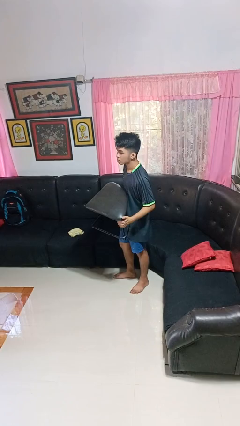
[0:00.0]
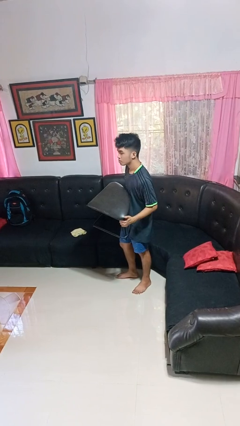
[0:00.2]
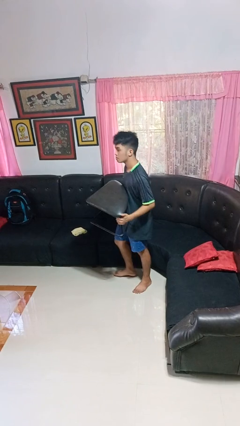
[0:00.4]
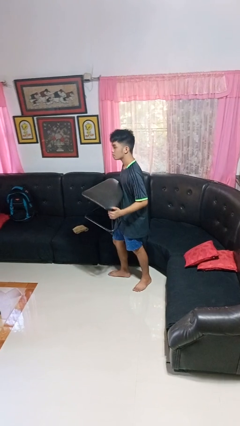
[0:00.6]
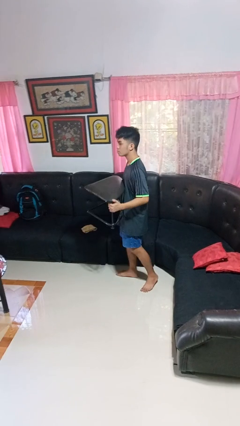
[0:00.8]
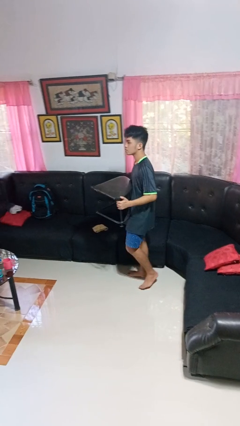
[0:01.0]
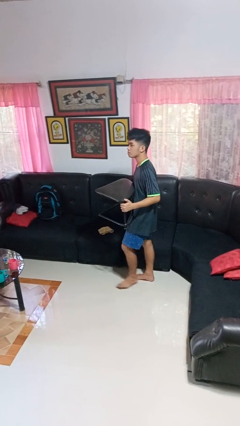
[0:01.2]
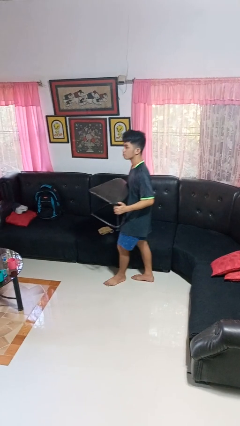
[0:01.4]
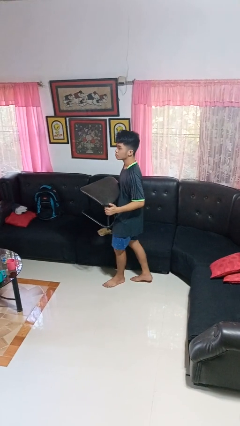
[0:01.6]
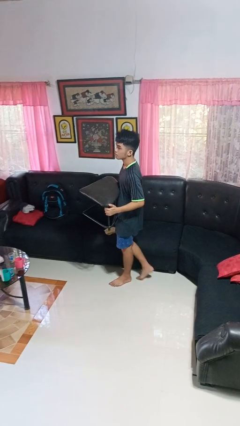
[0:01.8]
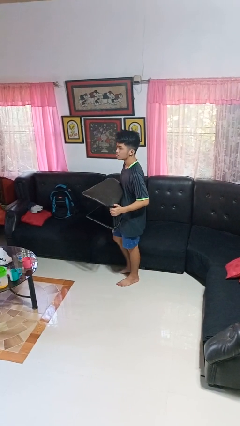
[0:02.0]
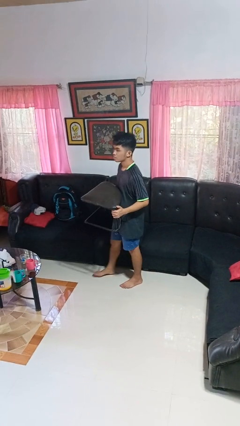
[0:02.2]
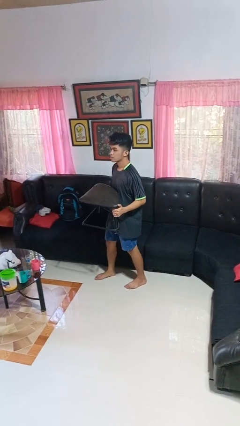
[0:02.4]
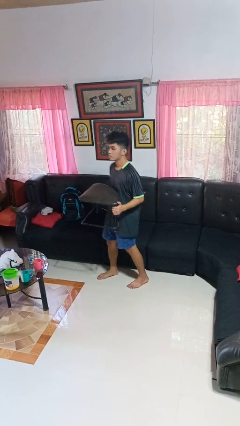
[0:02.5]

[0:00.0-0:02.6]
person carries furniture

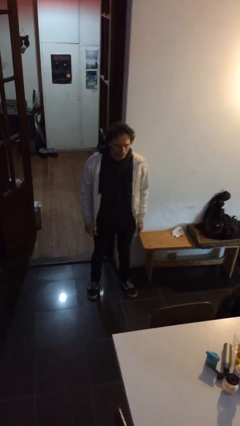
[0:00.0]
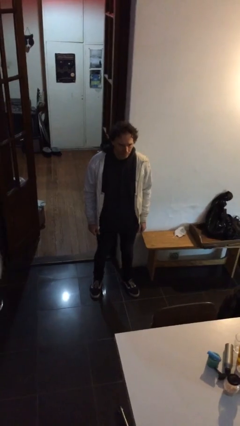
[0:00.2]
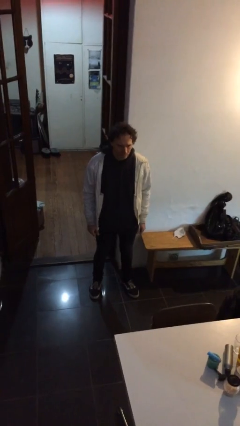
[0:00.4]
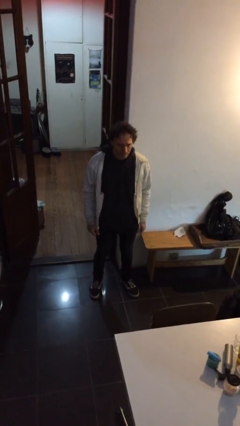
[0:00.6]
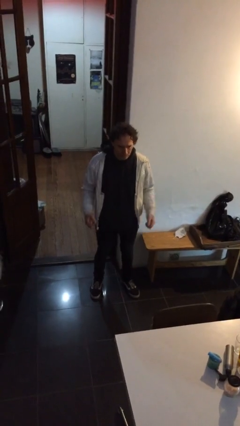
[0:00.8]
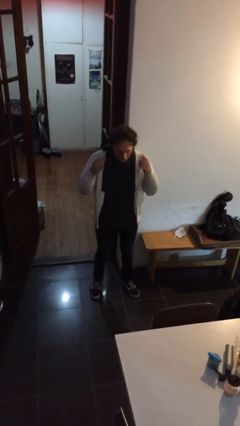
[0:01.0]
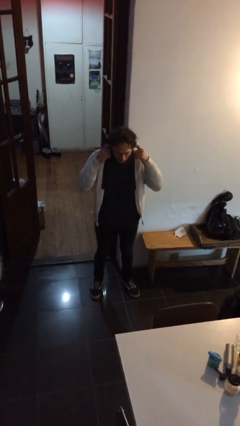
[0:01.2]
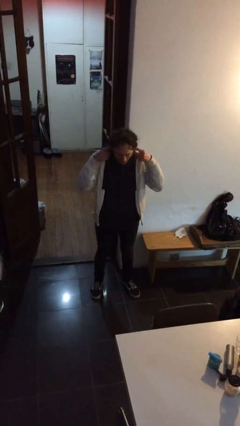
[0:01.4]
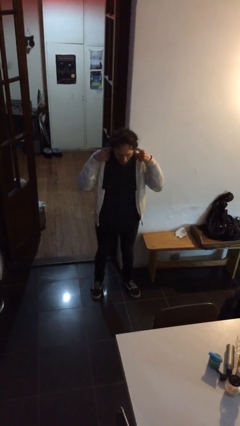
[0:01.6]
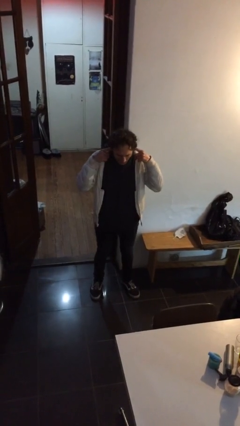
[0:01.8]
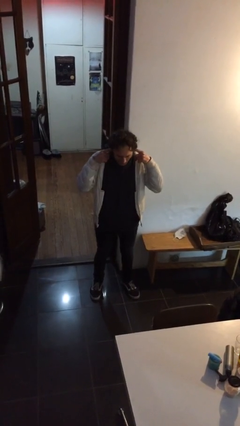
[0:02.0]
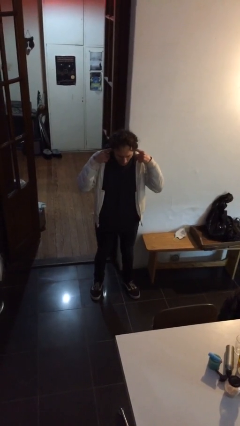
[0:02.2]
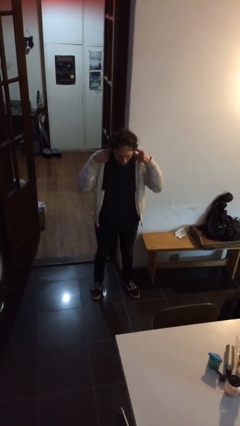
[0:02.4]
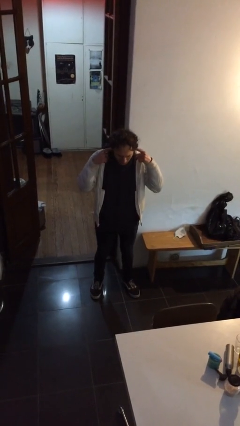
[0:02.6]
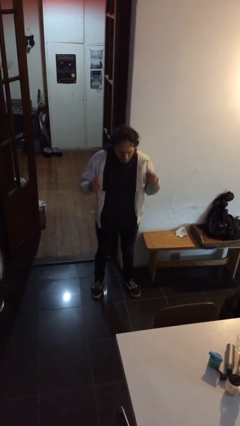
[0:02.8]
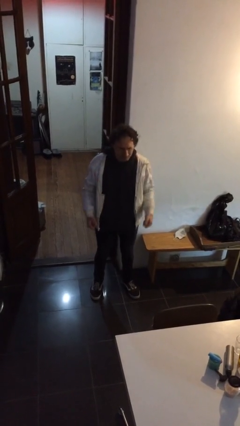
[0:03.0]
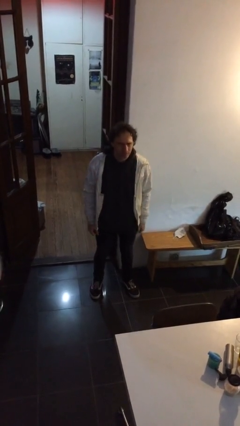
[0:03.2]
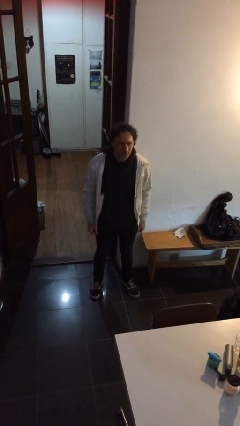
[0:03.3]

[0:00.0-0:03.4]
person puts fingers in ear

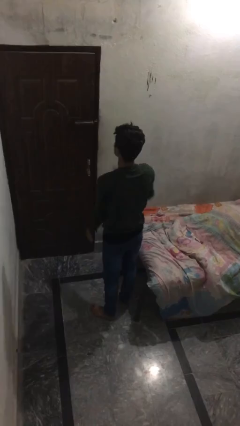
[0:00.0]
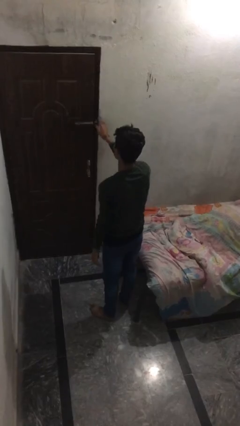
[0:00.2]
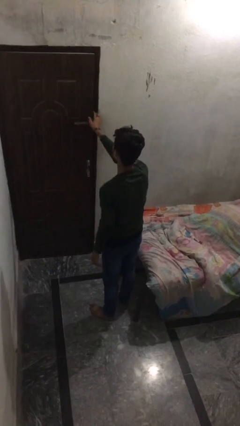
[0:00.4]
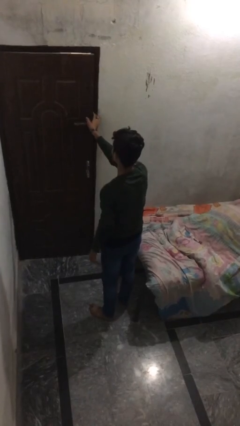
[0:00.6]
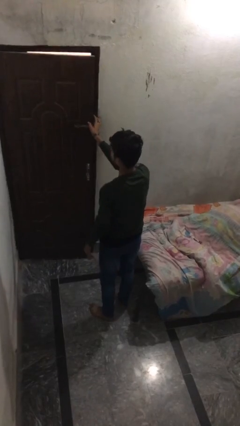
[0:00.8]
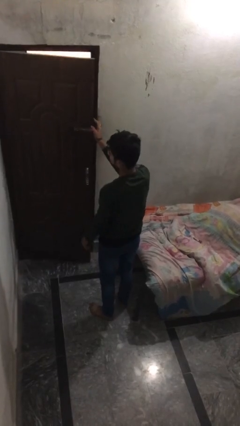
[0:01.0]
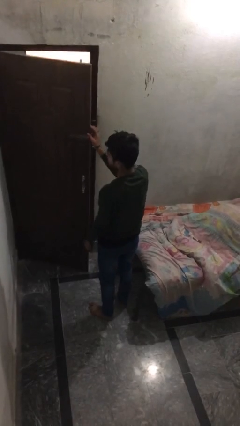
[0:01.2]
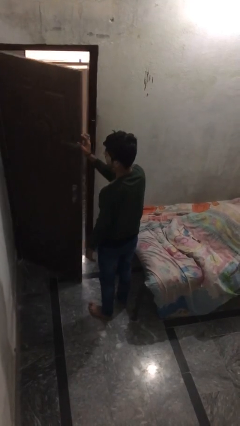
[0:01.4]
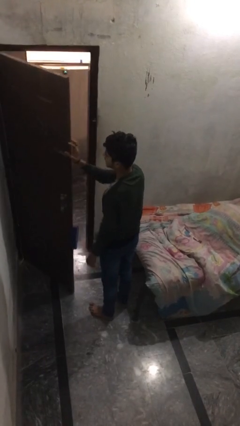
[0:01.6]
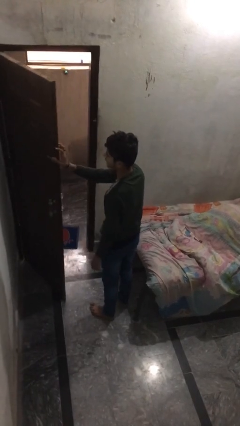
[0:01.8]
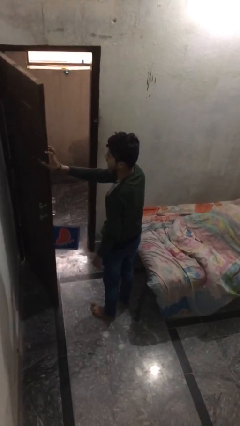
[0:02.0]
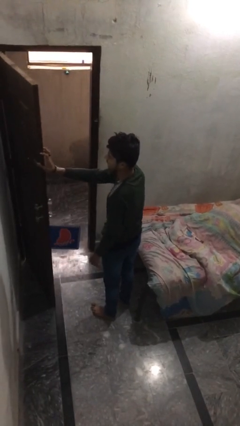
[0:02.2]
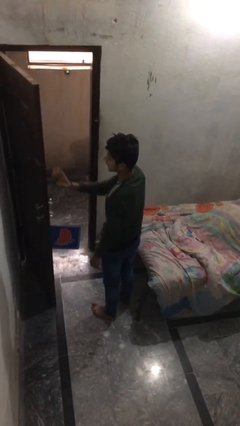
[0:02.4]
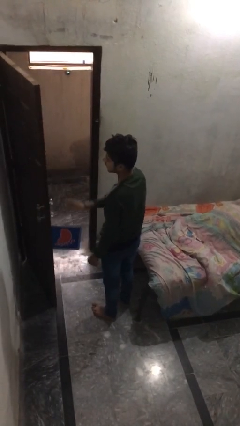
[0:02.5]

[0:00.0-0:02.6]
person opens facility door

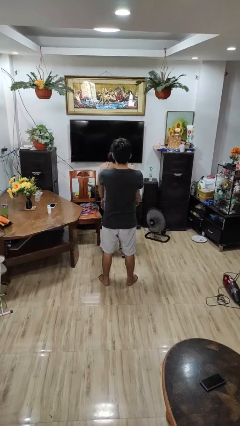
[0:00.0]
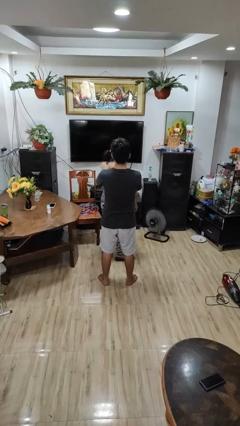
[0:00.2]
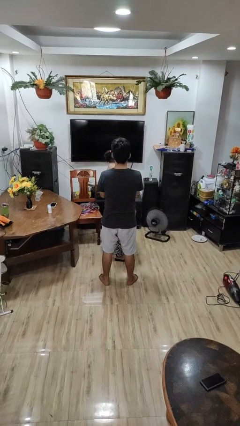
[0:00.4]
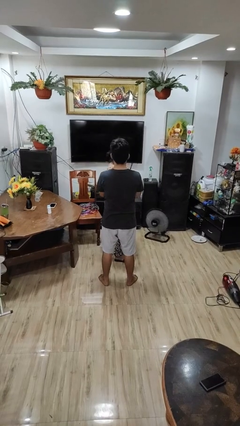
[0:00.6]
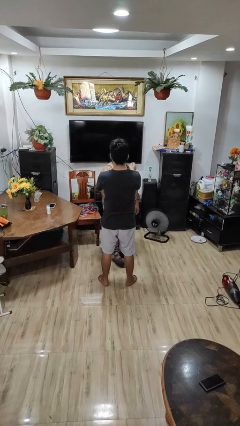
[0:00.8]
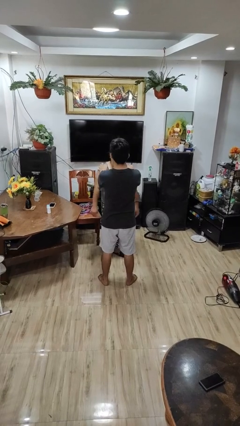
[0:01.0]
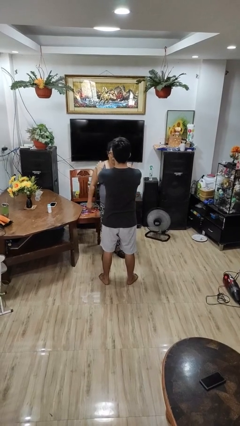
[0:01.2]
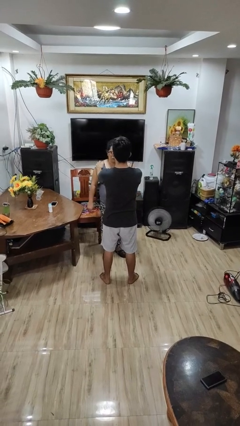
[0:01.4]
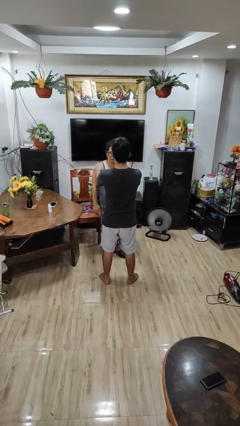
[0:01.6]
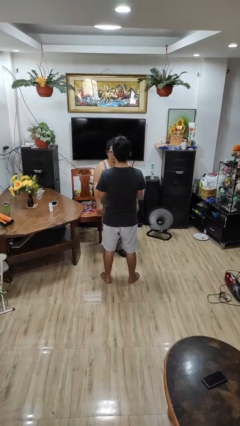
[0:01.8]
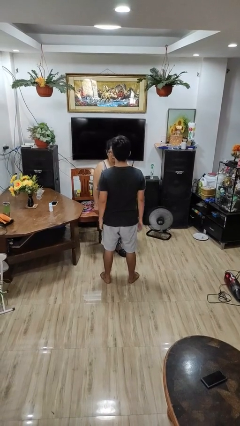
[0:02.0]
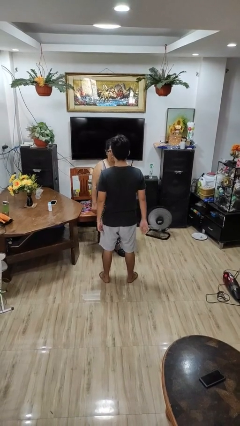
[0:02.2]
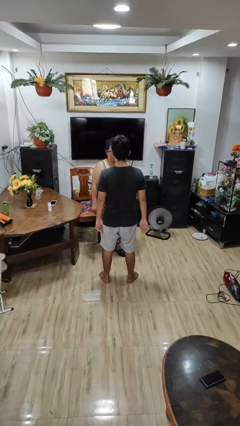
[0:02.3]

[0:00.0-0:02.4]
person spins person around

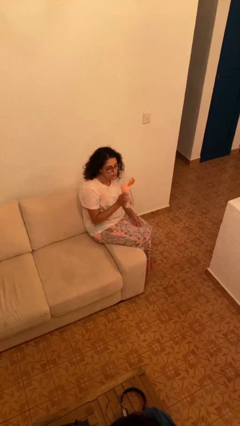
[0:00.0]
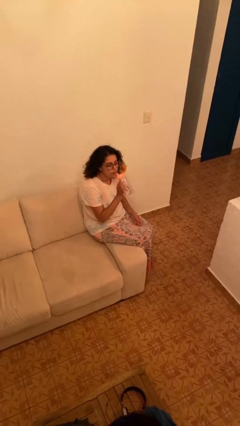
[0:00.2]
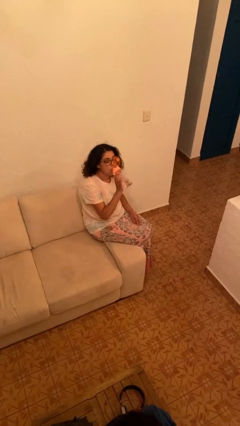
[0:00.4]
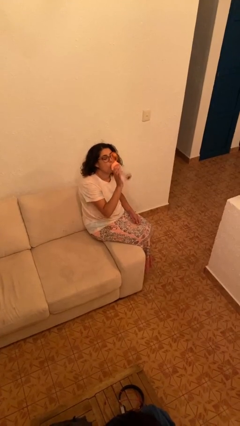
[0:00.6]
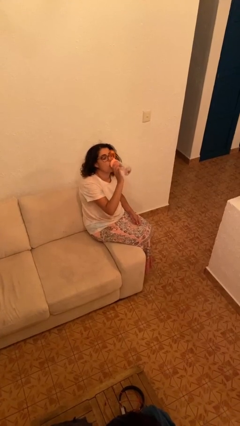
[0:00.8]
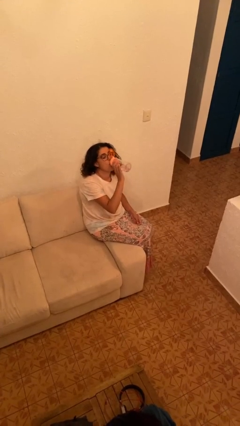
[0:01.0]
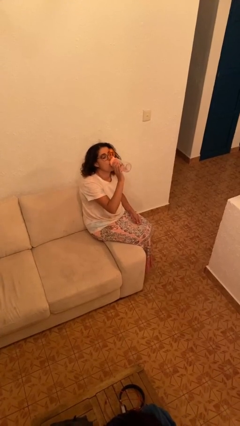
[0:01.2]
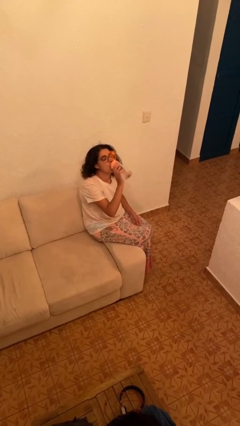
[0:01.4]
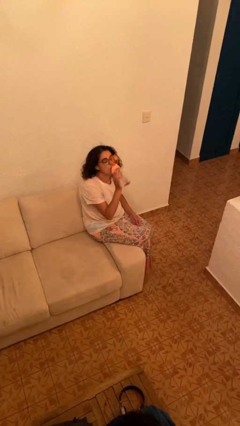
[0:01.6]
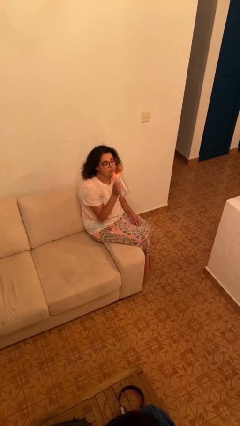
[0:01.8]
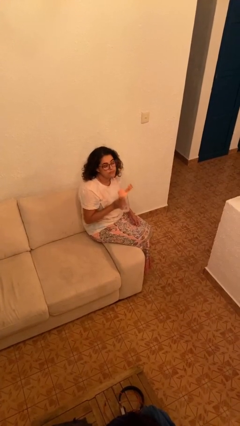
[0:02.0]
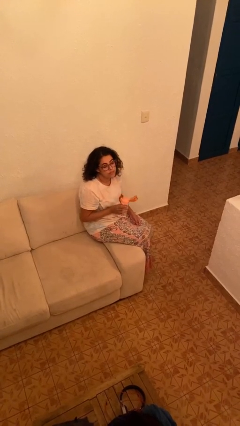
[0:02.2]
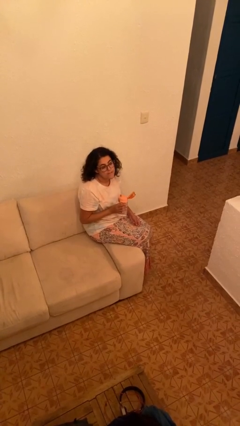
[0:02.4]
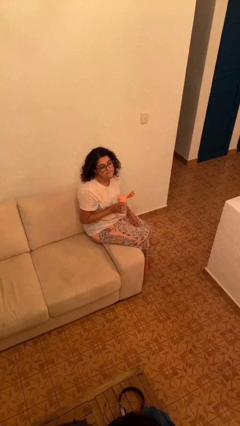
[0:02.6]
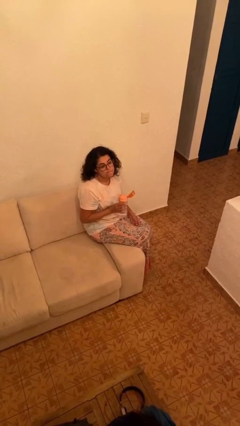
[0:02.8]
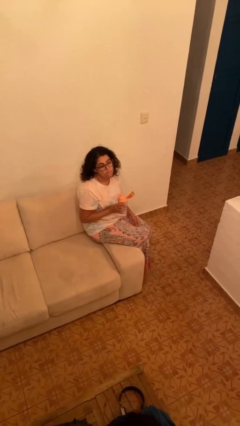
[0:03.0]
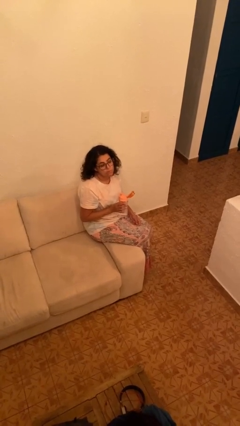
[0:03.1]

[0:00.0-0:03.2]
person drinks from bottle

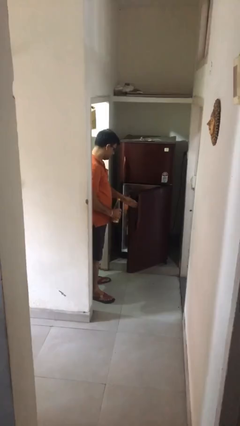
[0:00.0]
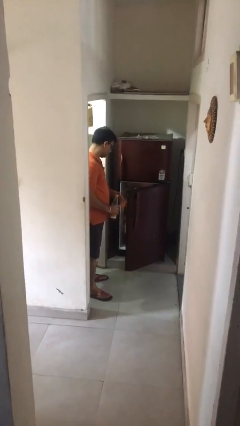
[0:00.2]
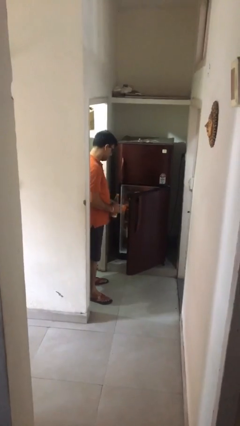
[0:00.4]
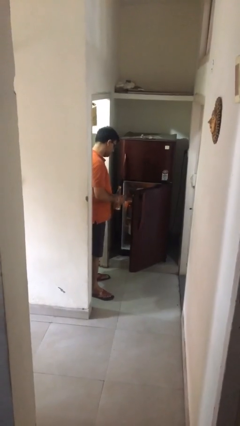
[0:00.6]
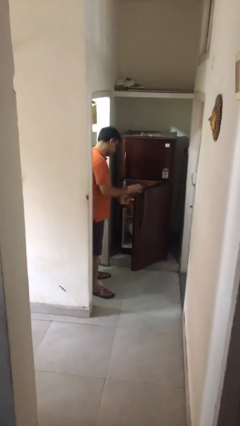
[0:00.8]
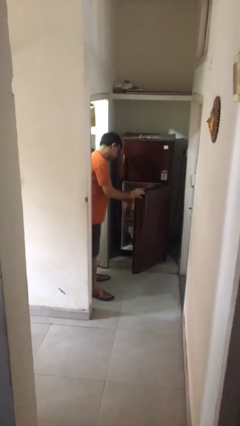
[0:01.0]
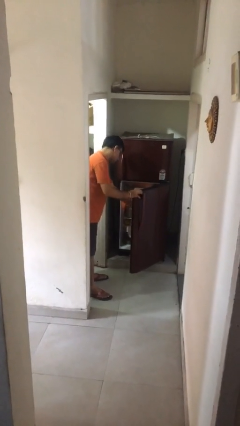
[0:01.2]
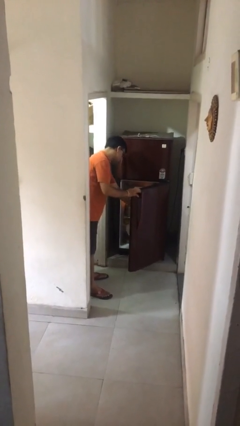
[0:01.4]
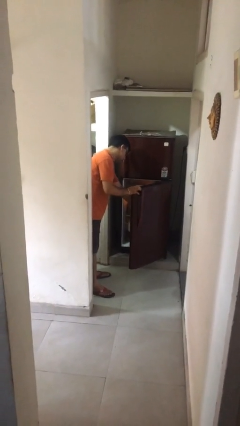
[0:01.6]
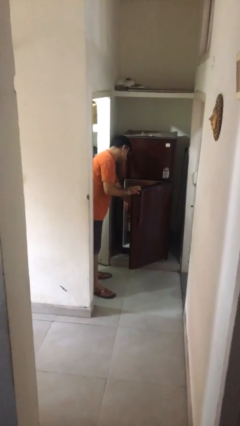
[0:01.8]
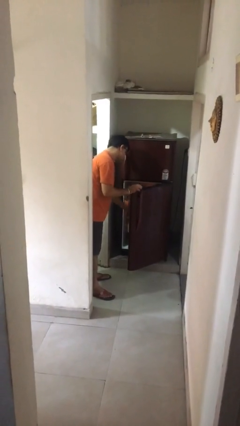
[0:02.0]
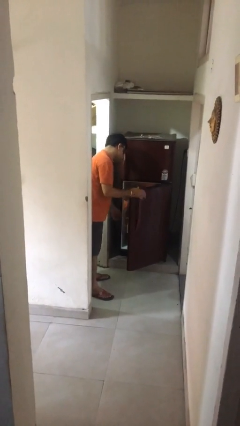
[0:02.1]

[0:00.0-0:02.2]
person puts object into refrigerator

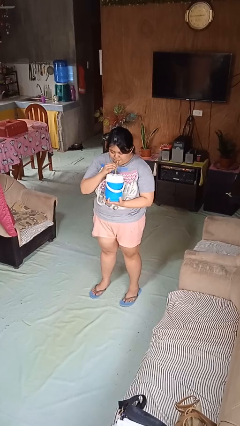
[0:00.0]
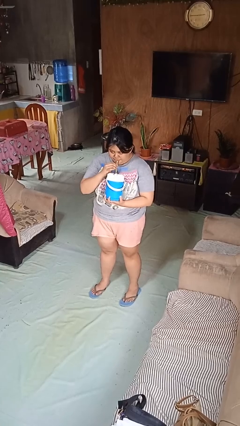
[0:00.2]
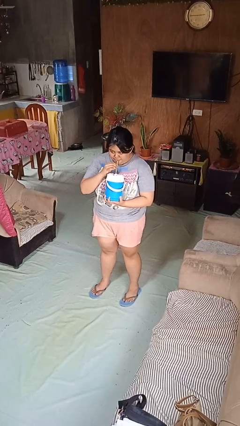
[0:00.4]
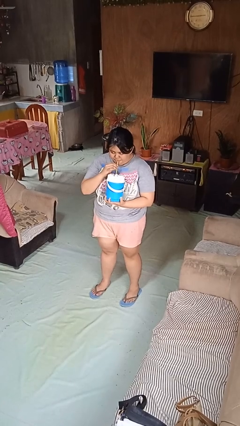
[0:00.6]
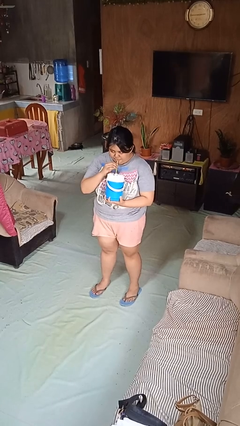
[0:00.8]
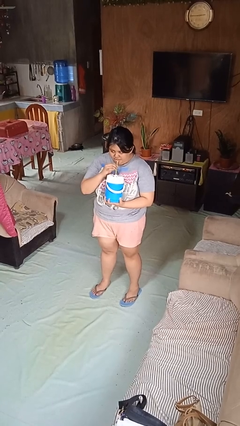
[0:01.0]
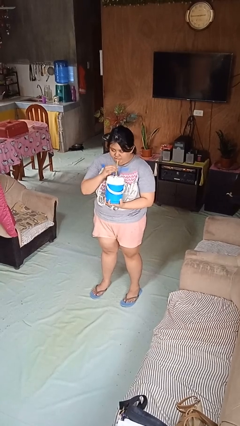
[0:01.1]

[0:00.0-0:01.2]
person drinks from straw
